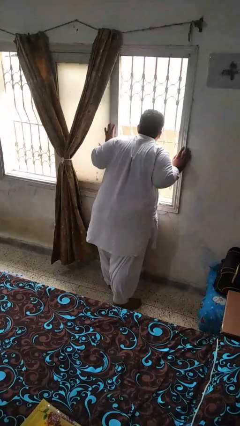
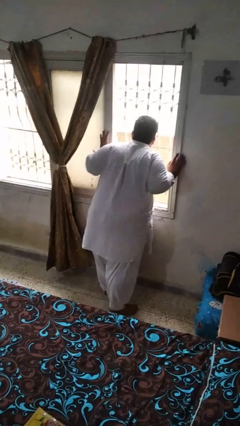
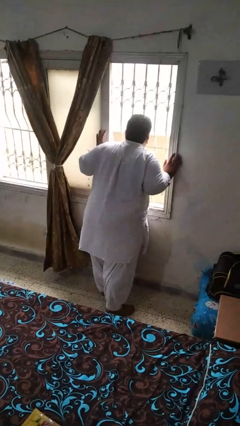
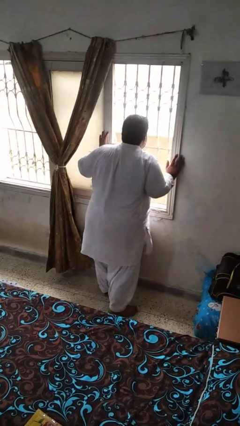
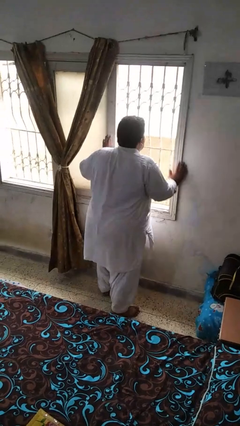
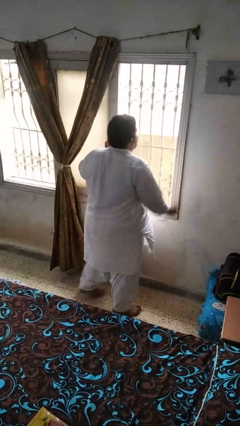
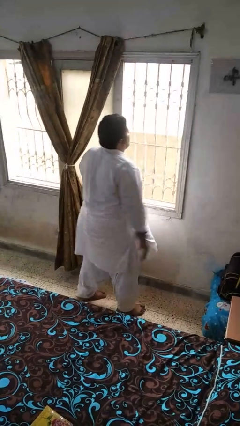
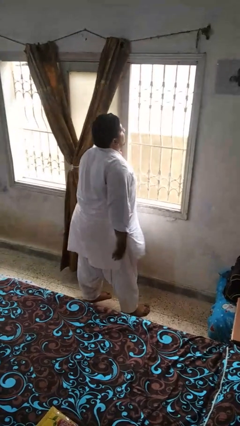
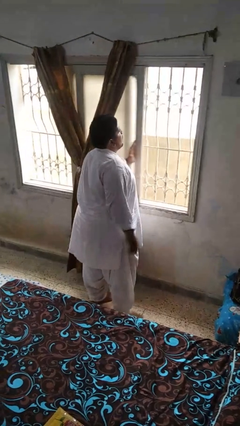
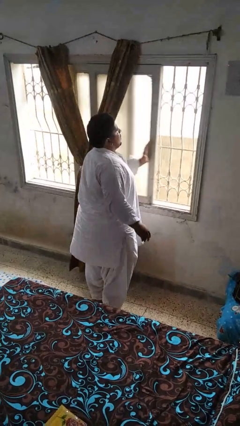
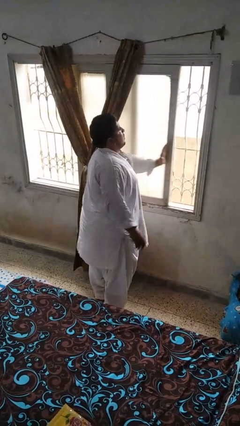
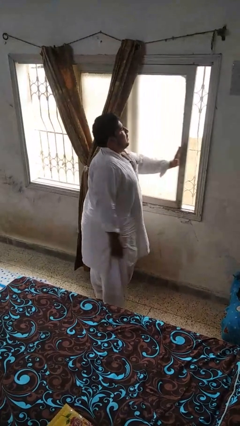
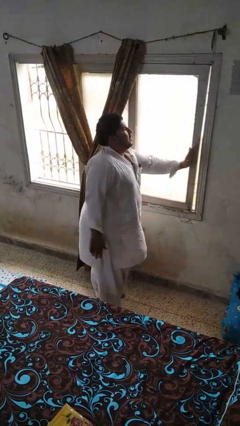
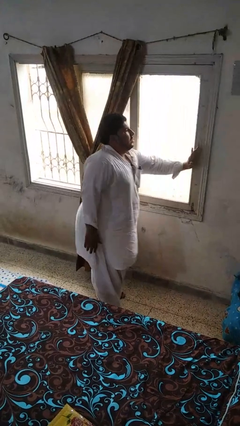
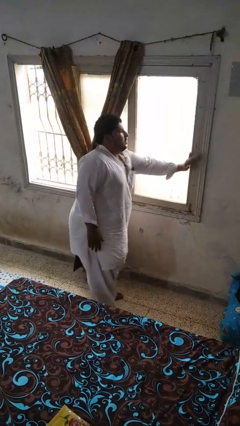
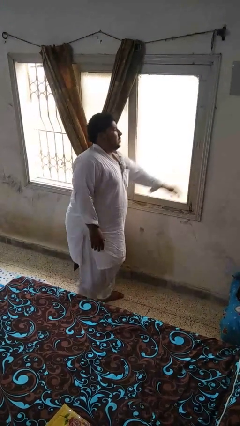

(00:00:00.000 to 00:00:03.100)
person closes home window

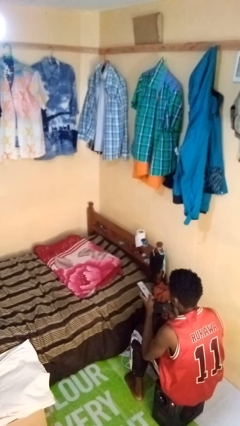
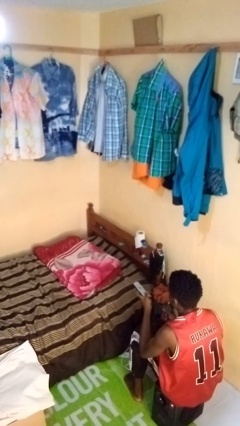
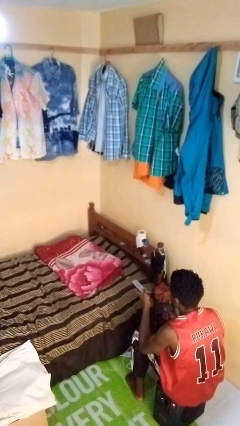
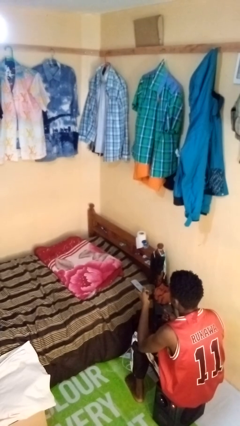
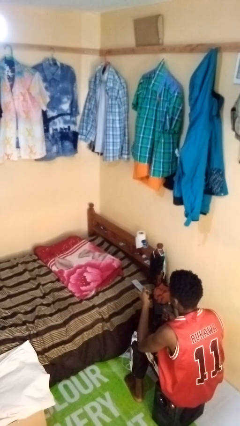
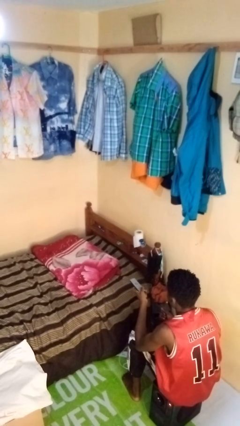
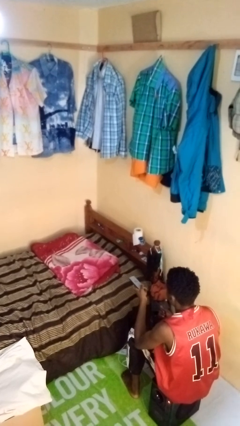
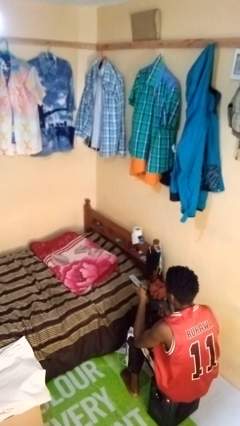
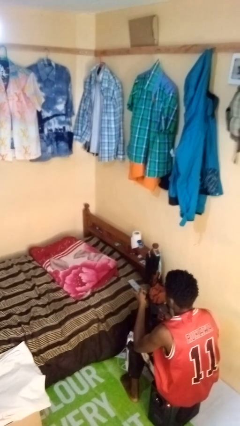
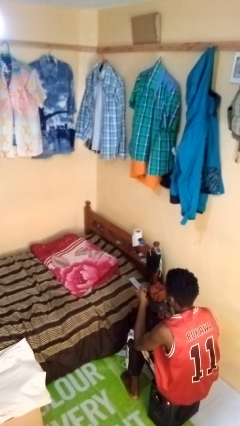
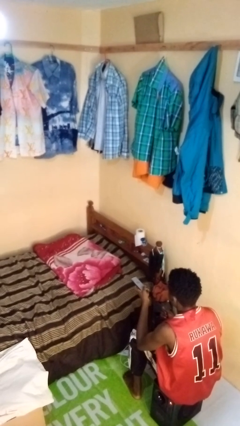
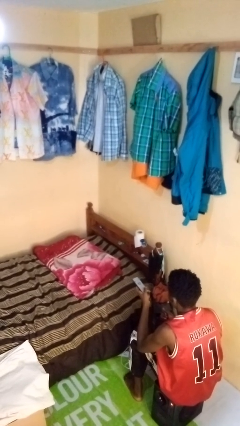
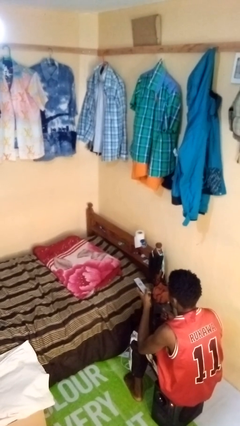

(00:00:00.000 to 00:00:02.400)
person uses television remote

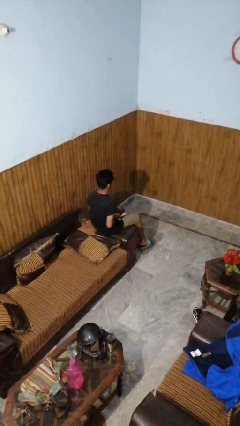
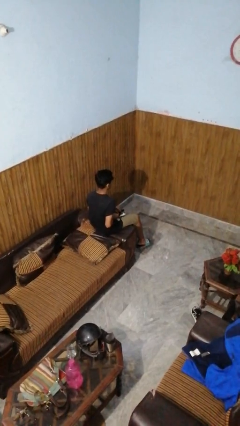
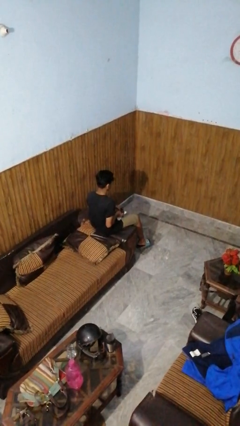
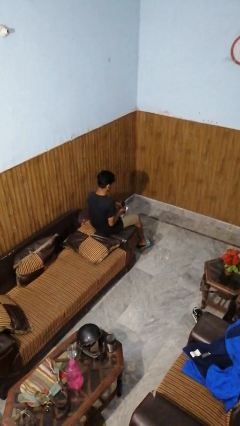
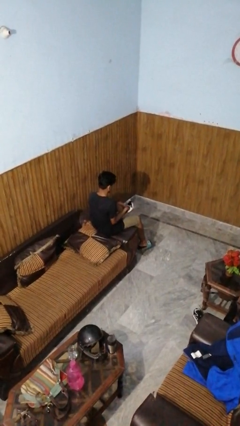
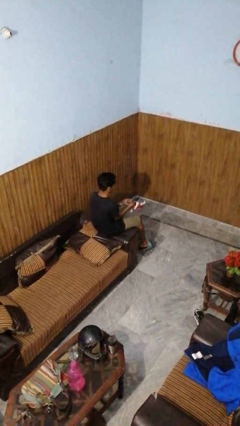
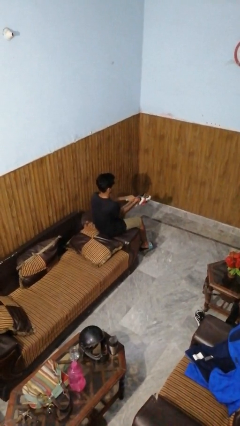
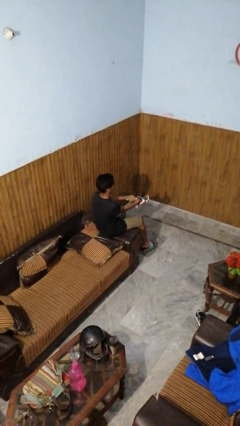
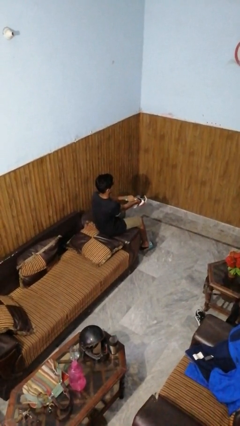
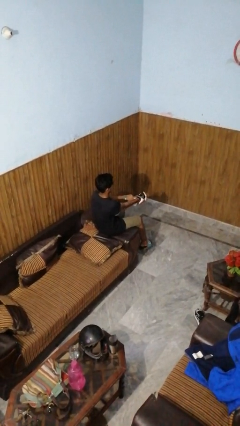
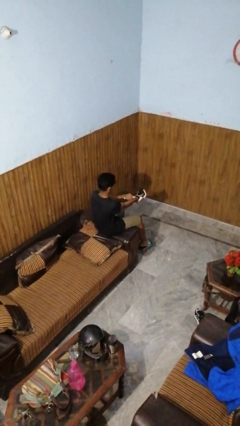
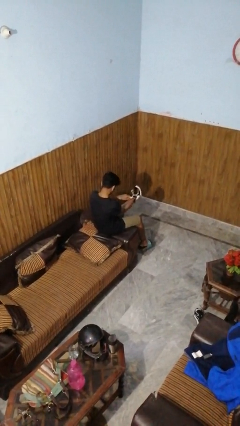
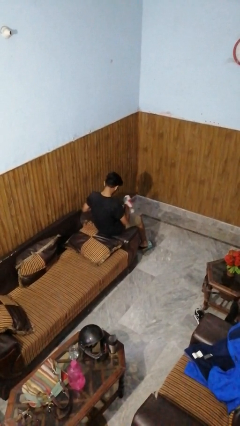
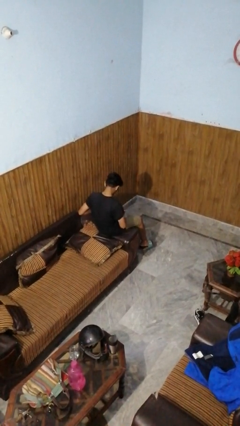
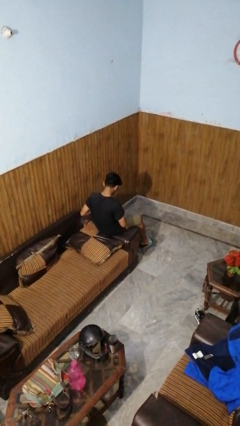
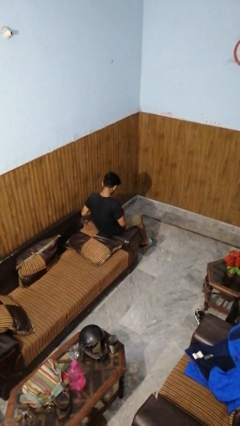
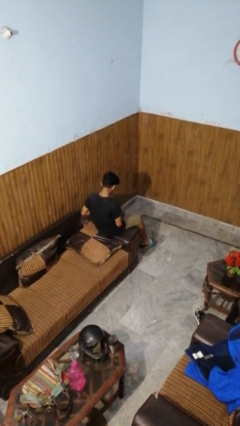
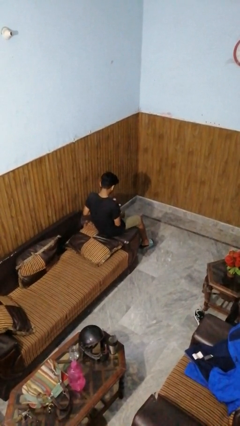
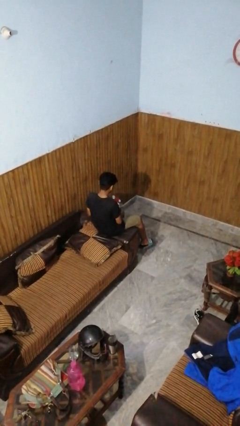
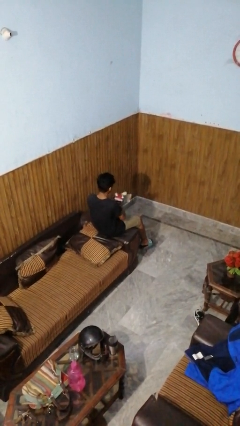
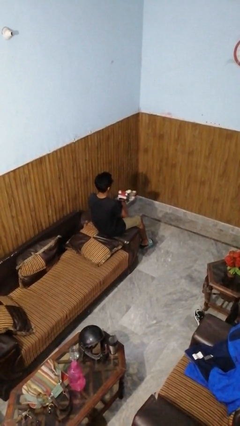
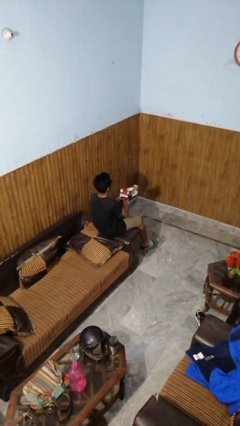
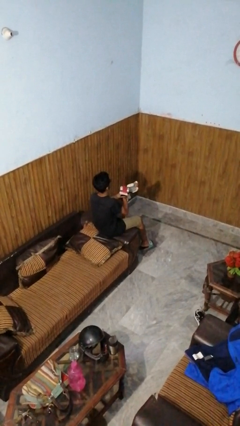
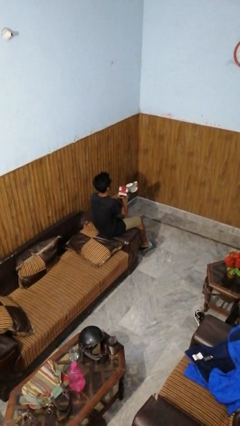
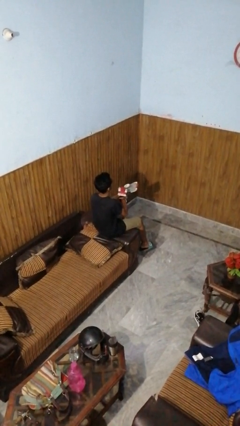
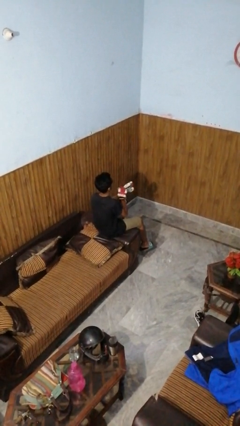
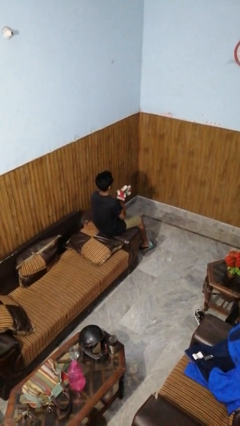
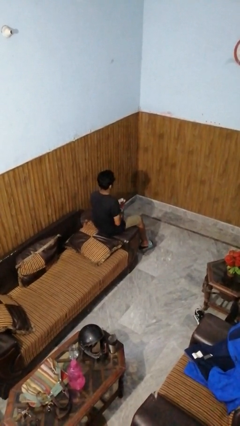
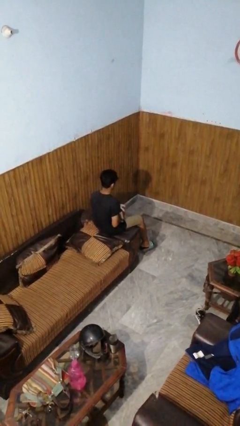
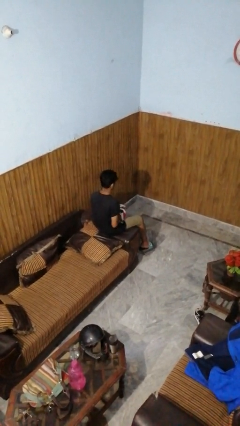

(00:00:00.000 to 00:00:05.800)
person puts on gloves

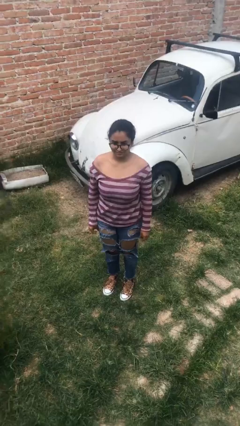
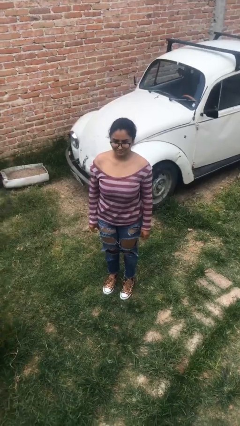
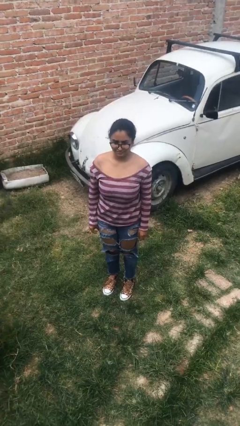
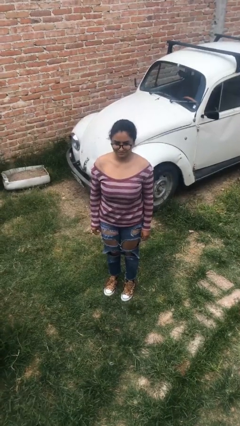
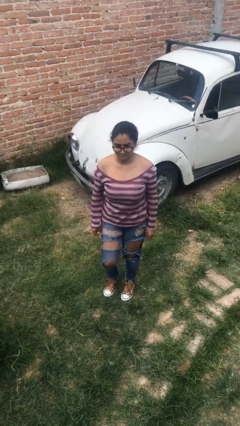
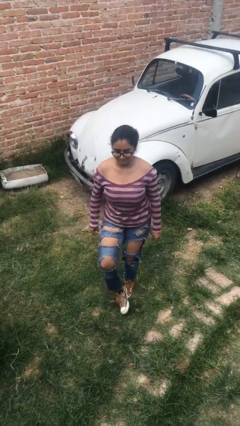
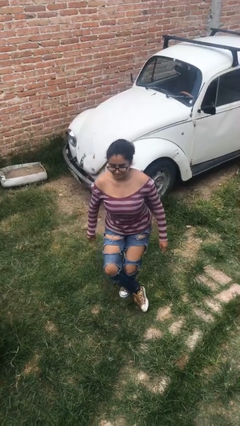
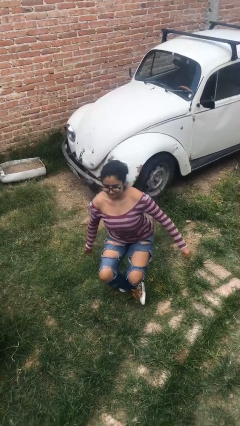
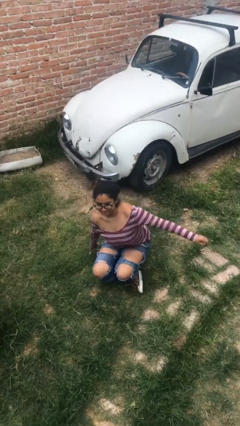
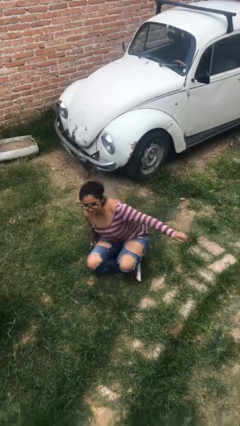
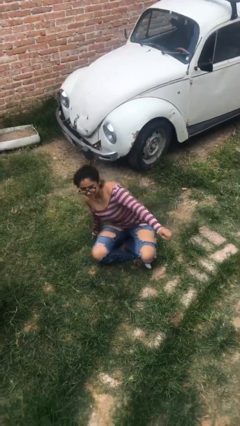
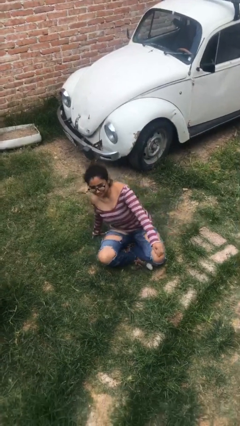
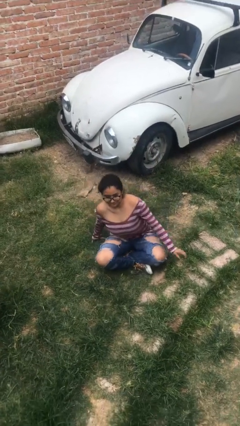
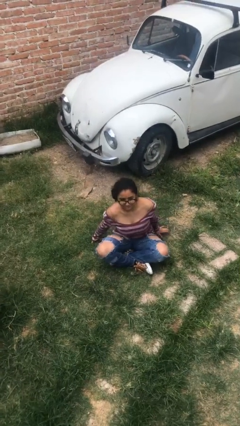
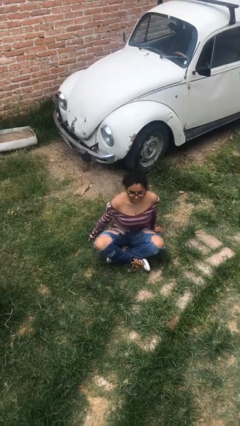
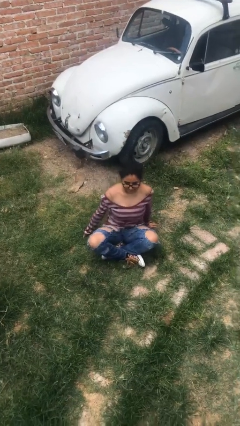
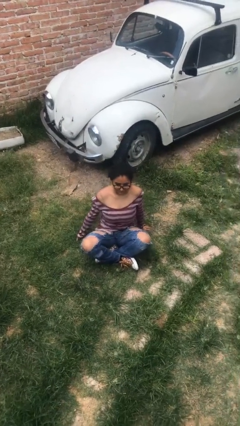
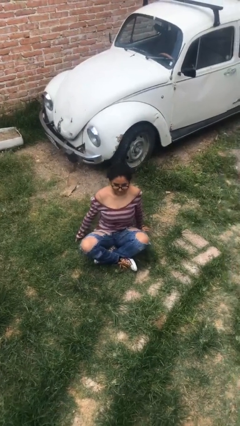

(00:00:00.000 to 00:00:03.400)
person sits crisscross

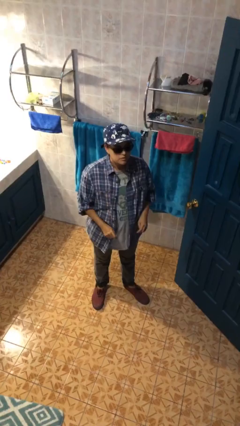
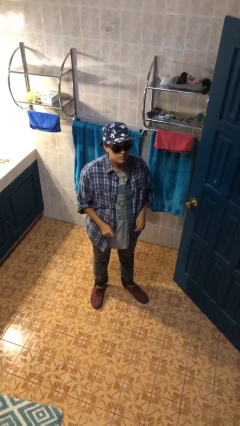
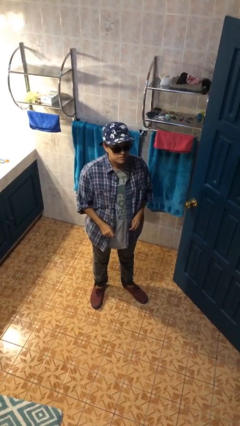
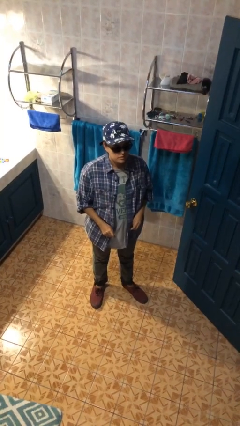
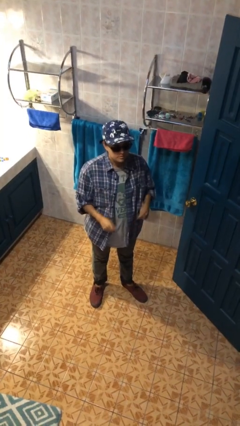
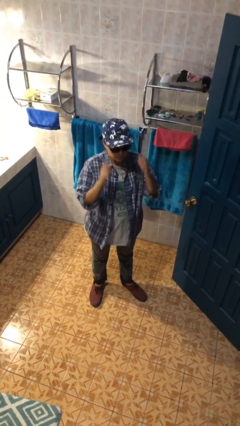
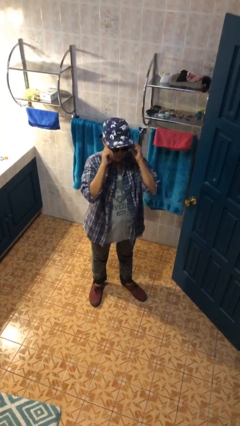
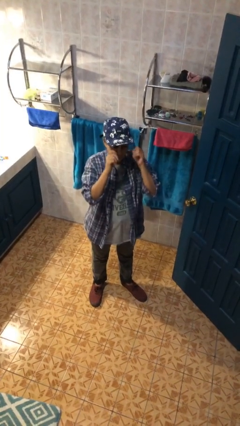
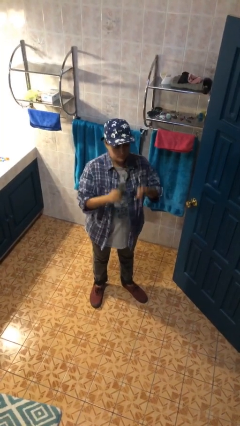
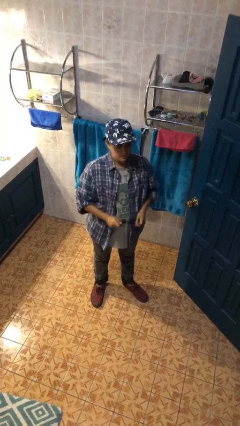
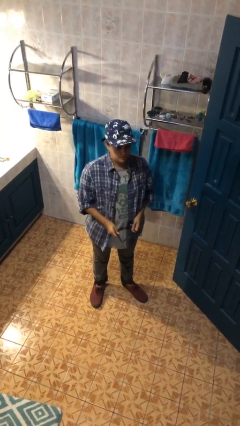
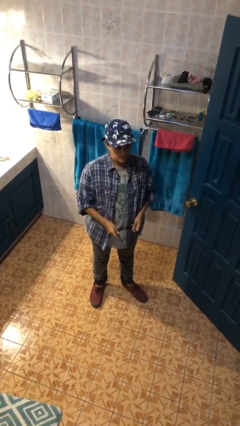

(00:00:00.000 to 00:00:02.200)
person takes off sunglasses

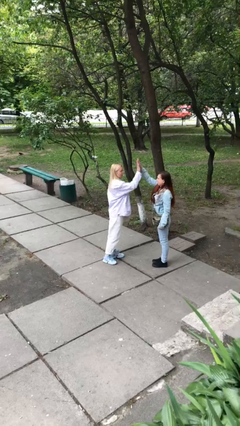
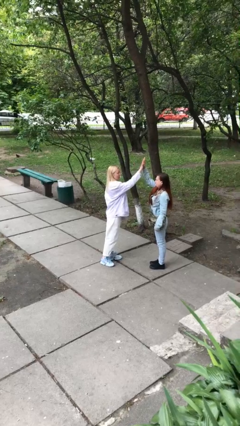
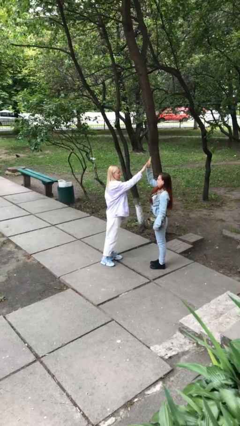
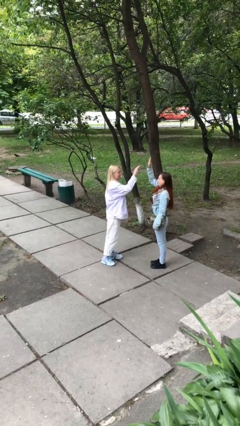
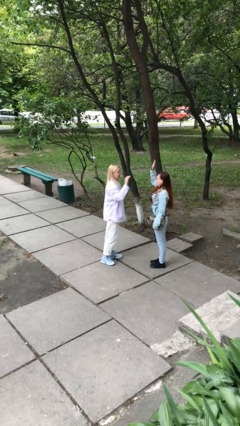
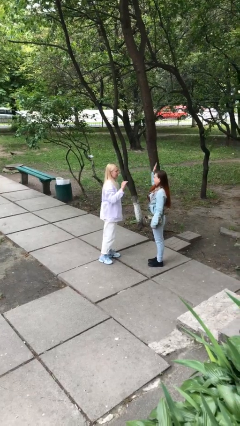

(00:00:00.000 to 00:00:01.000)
person highfives hand
